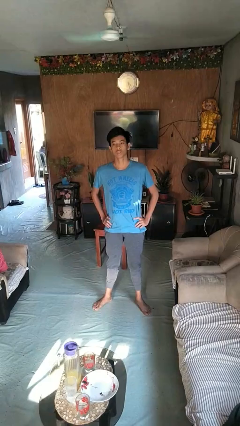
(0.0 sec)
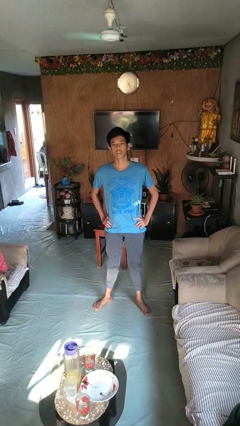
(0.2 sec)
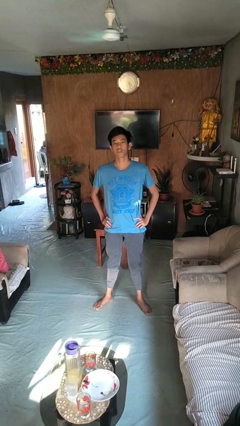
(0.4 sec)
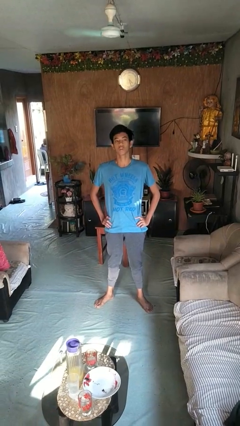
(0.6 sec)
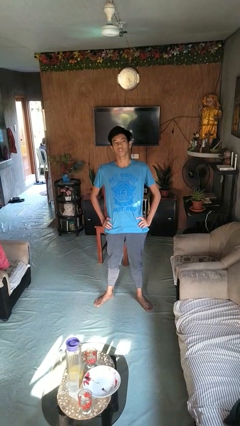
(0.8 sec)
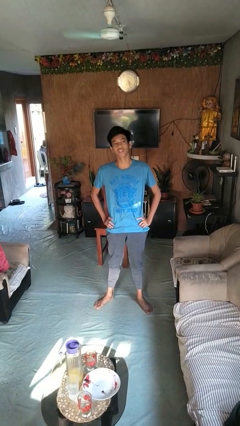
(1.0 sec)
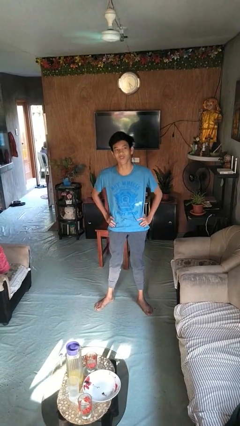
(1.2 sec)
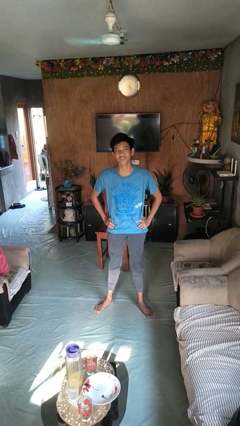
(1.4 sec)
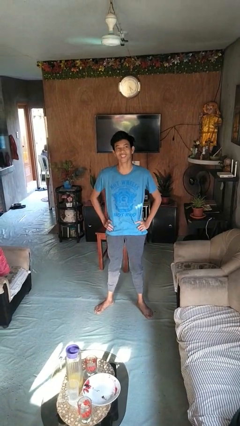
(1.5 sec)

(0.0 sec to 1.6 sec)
person wiggles hips

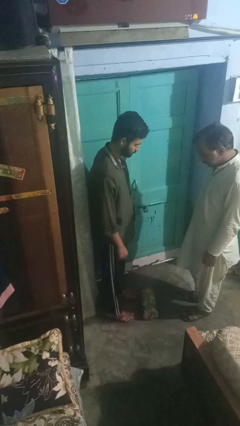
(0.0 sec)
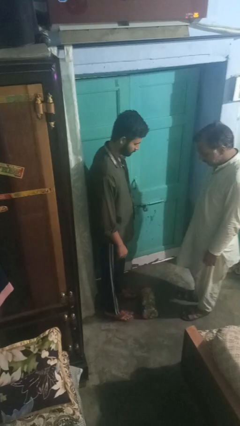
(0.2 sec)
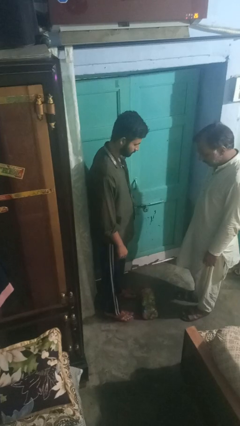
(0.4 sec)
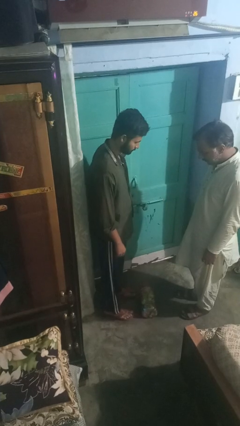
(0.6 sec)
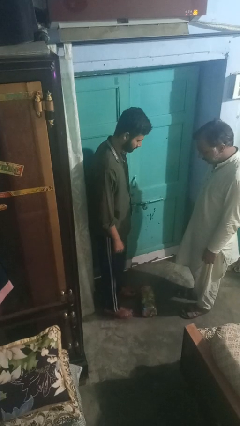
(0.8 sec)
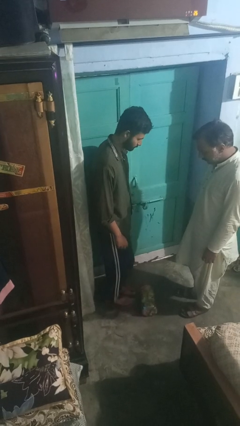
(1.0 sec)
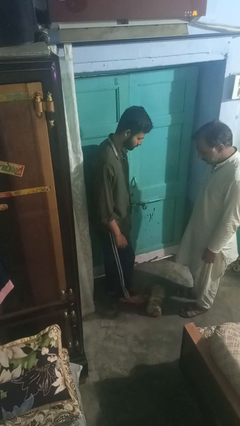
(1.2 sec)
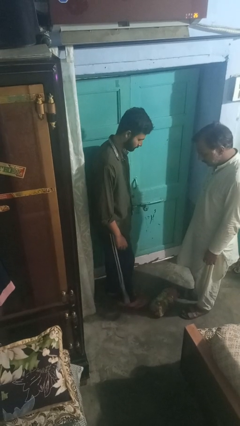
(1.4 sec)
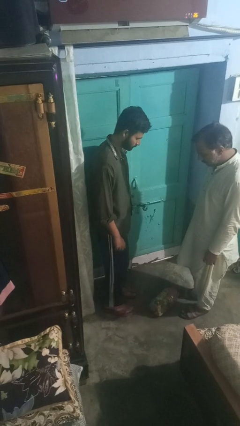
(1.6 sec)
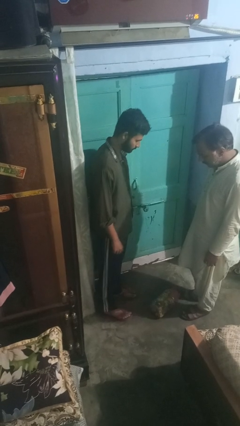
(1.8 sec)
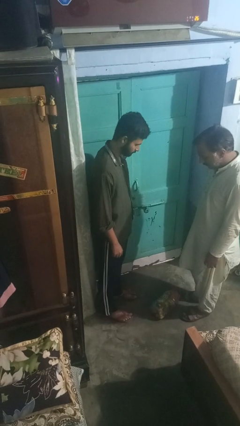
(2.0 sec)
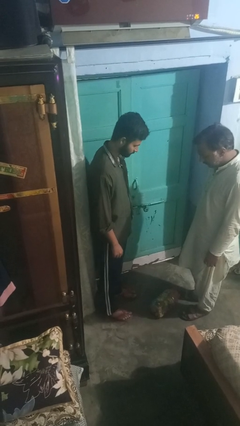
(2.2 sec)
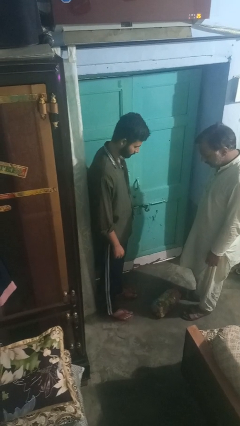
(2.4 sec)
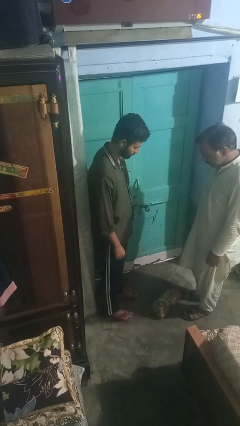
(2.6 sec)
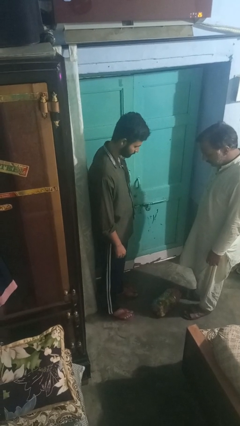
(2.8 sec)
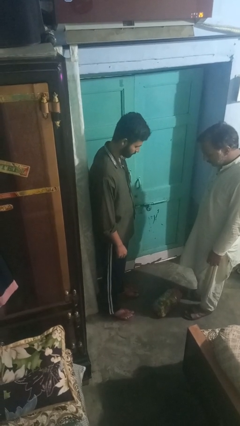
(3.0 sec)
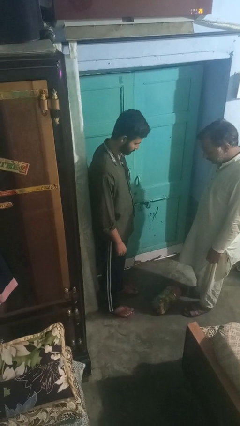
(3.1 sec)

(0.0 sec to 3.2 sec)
person kicks object to person

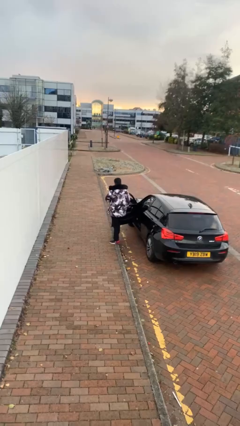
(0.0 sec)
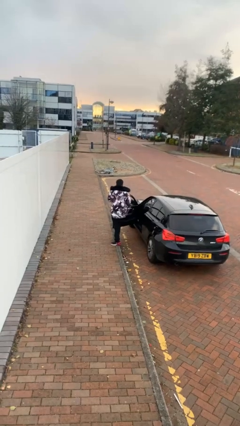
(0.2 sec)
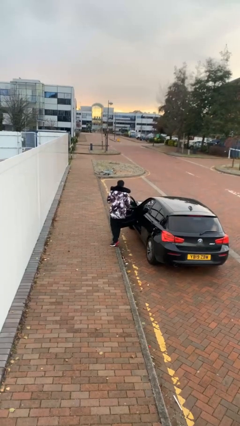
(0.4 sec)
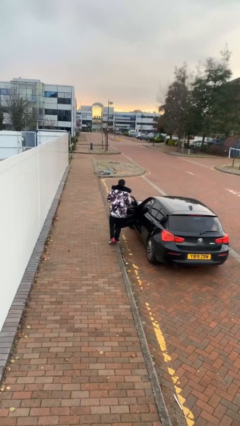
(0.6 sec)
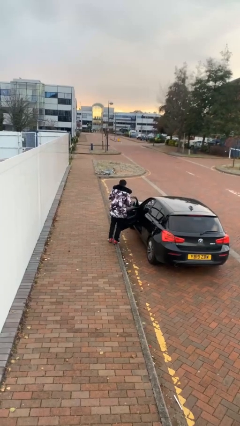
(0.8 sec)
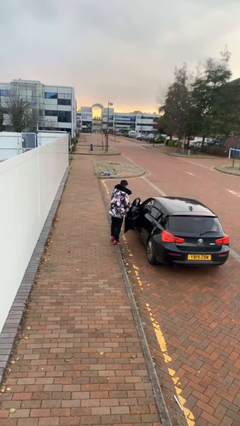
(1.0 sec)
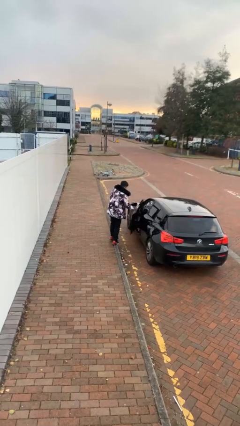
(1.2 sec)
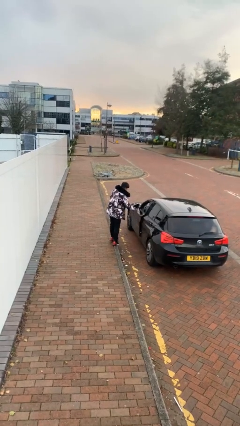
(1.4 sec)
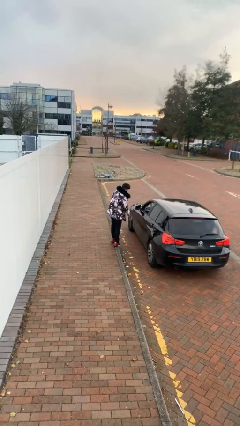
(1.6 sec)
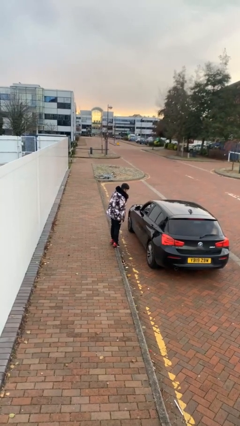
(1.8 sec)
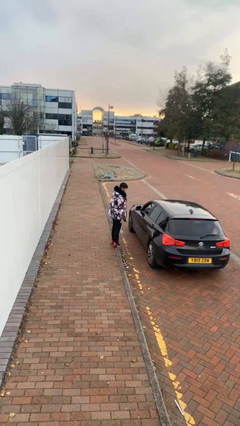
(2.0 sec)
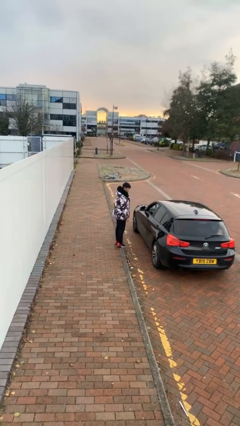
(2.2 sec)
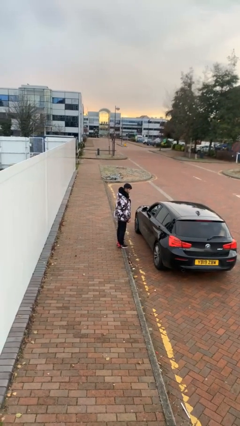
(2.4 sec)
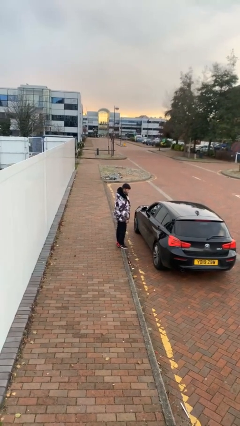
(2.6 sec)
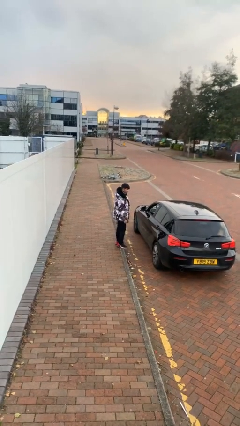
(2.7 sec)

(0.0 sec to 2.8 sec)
person closes car door

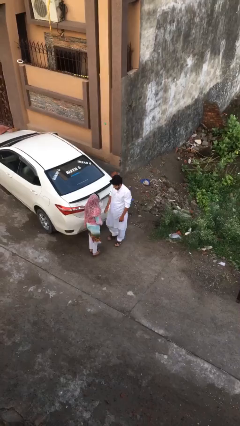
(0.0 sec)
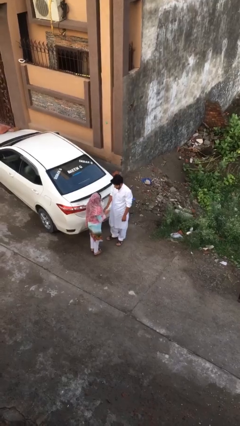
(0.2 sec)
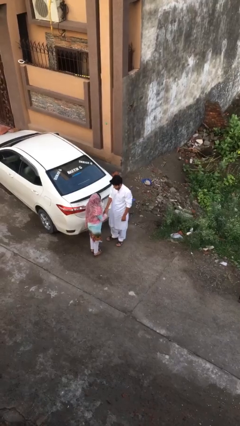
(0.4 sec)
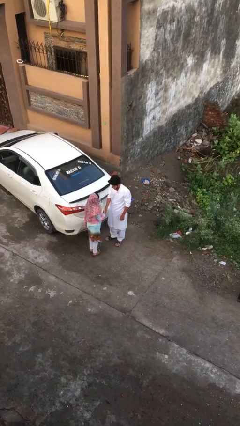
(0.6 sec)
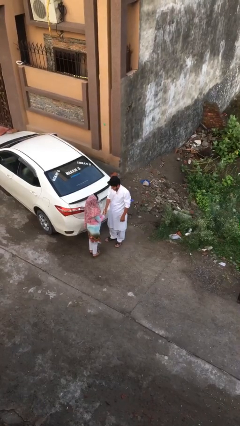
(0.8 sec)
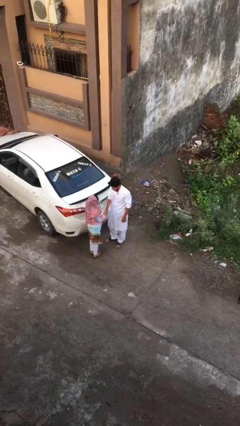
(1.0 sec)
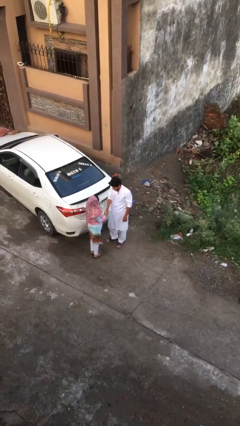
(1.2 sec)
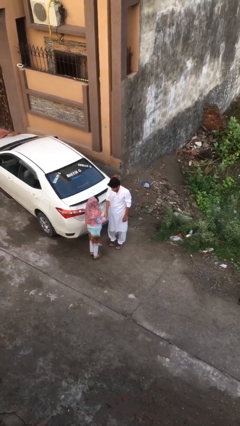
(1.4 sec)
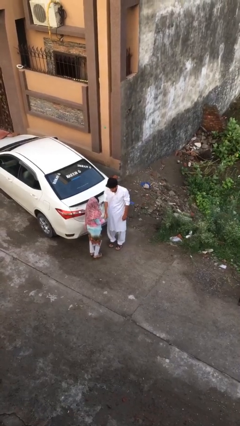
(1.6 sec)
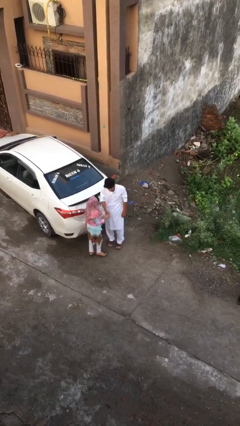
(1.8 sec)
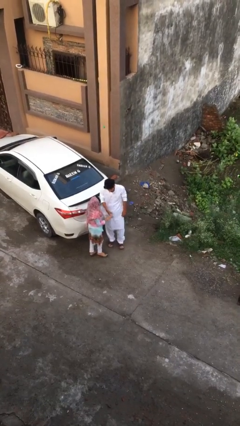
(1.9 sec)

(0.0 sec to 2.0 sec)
person shakes hand

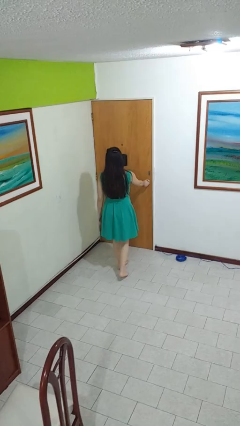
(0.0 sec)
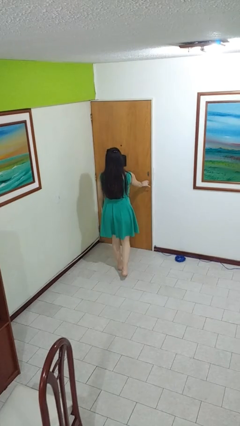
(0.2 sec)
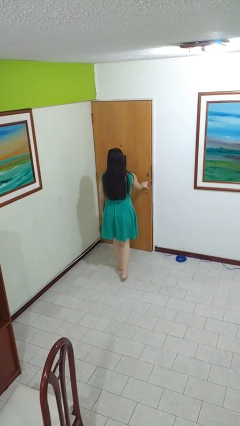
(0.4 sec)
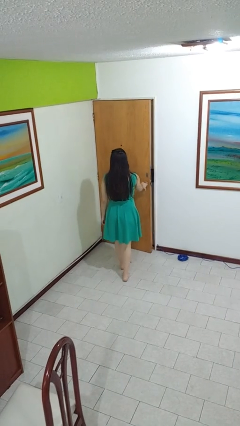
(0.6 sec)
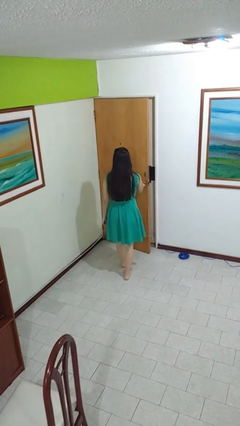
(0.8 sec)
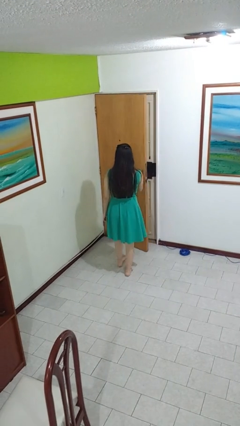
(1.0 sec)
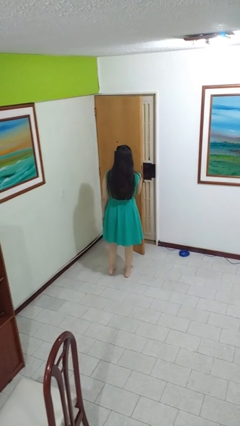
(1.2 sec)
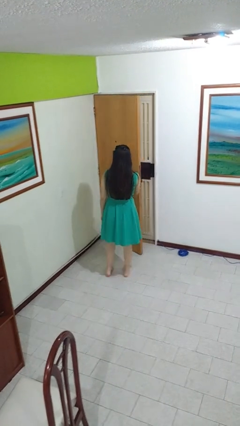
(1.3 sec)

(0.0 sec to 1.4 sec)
person opens facility door

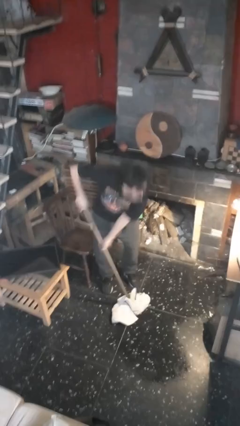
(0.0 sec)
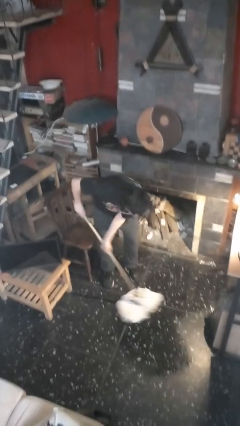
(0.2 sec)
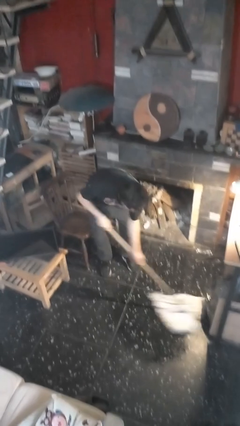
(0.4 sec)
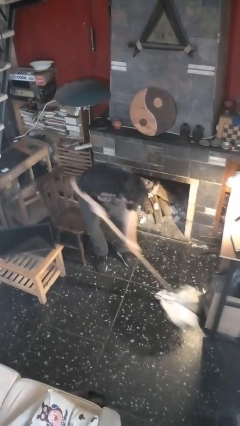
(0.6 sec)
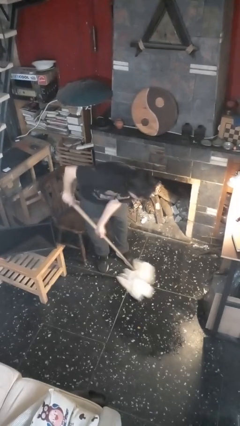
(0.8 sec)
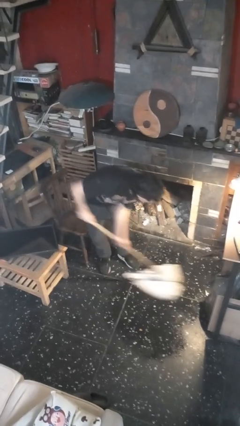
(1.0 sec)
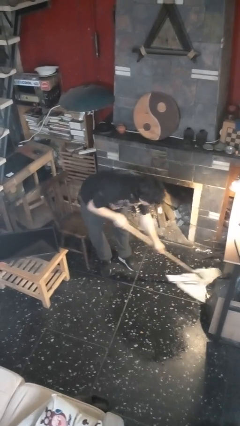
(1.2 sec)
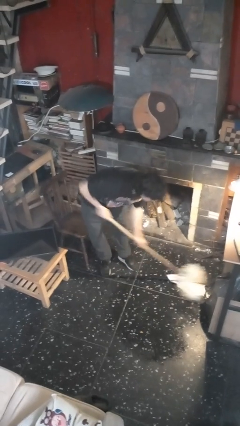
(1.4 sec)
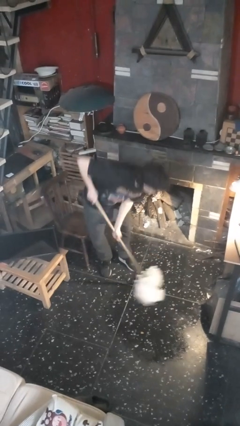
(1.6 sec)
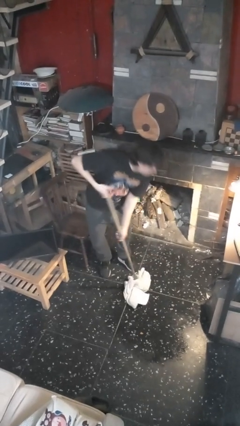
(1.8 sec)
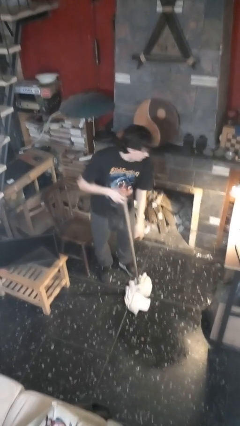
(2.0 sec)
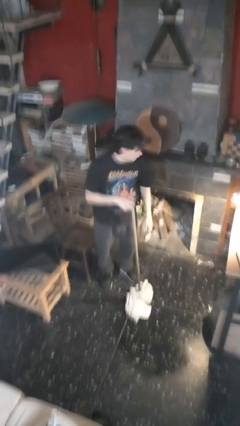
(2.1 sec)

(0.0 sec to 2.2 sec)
person mops

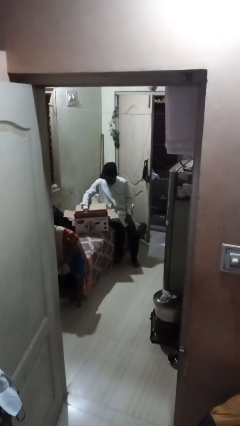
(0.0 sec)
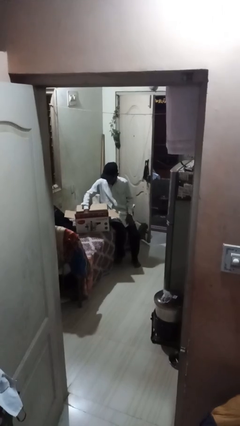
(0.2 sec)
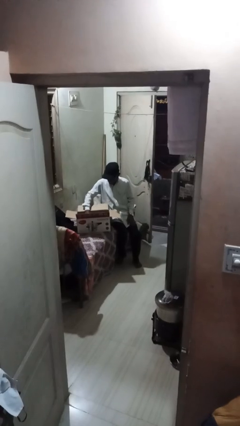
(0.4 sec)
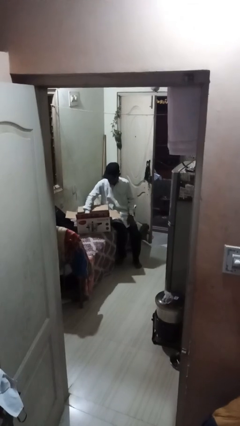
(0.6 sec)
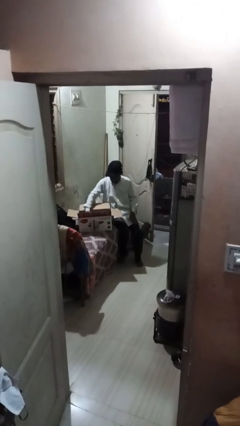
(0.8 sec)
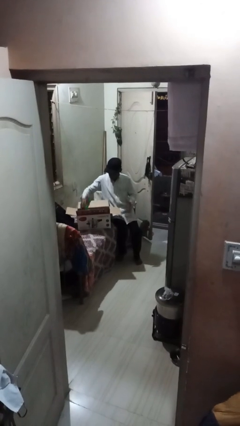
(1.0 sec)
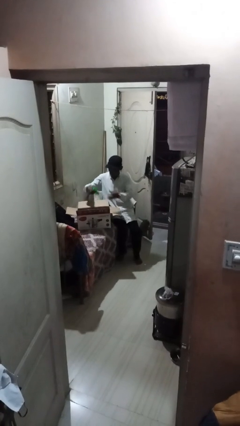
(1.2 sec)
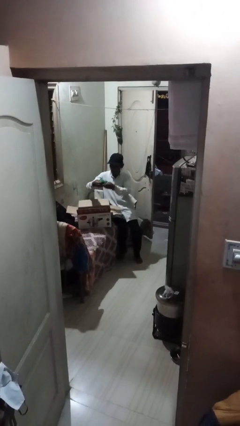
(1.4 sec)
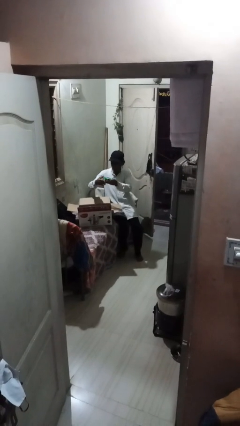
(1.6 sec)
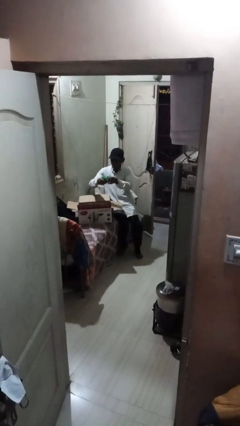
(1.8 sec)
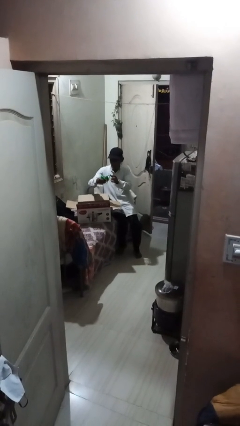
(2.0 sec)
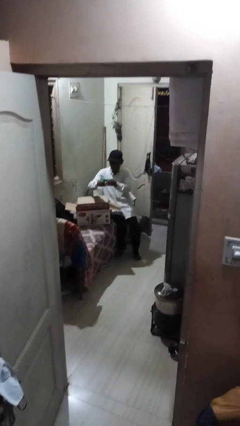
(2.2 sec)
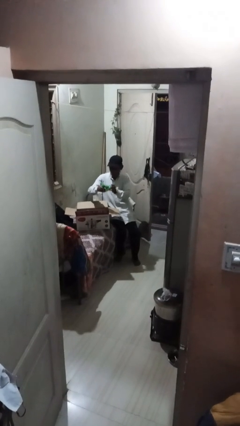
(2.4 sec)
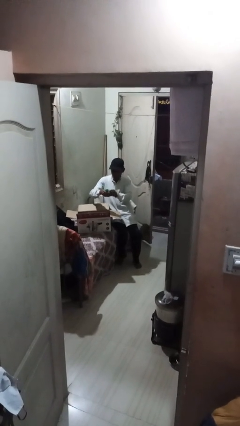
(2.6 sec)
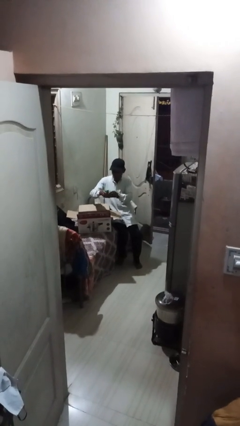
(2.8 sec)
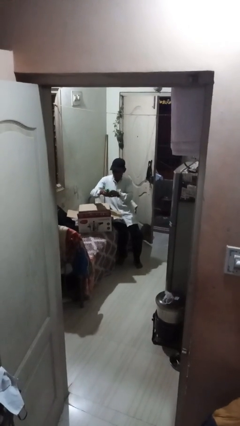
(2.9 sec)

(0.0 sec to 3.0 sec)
person takes object from box

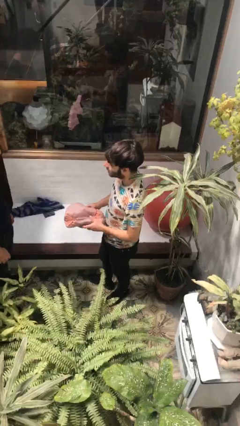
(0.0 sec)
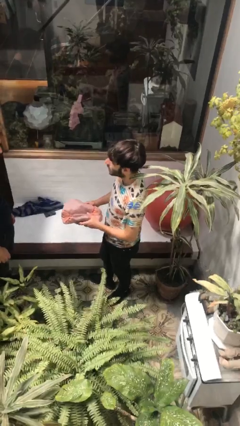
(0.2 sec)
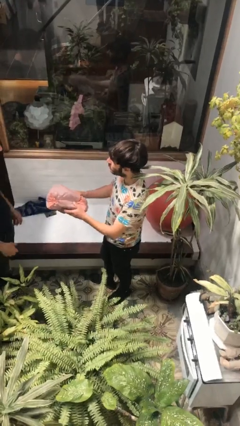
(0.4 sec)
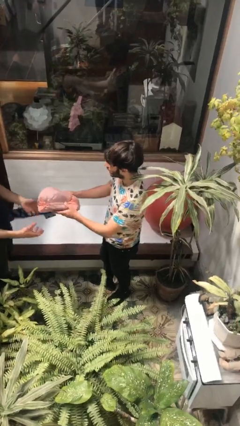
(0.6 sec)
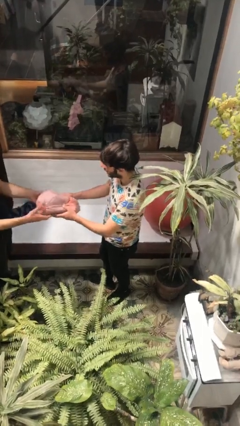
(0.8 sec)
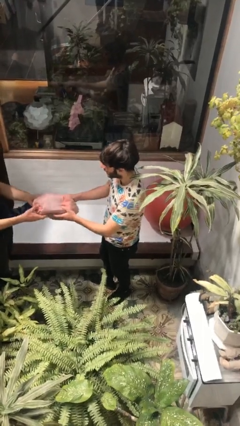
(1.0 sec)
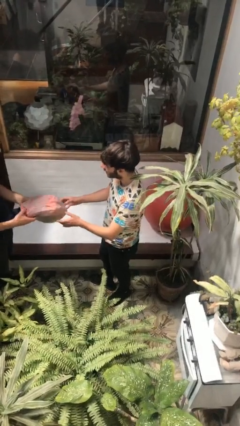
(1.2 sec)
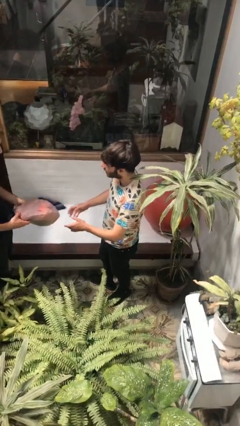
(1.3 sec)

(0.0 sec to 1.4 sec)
person transfers object to person
